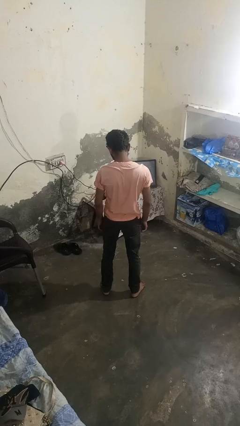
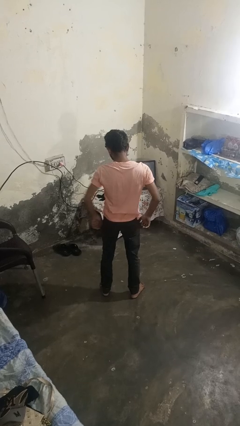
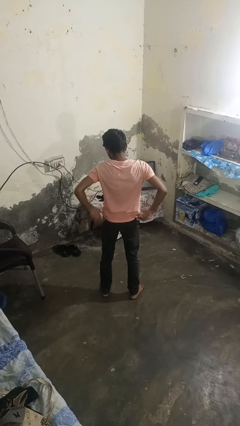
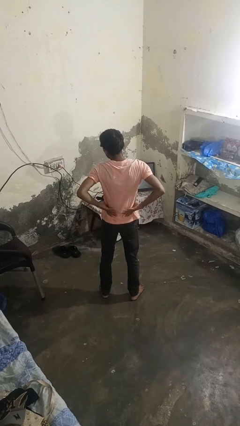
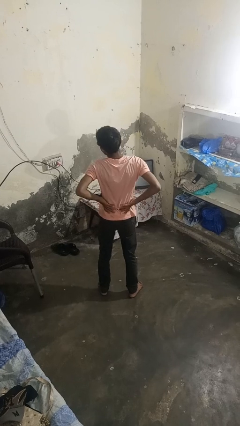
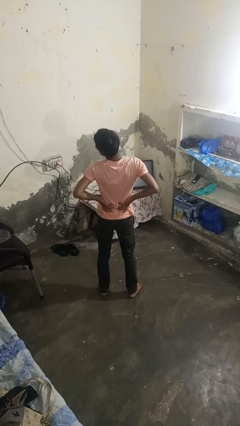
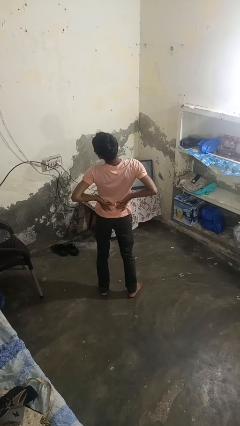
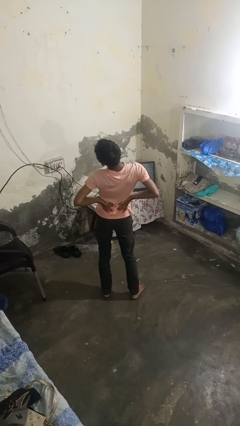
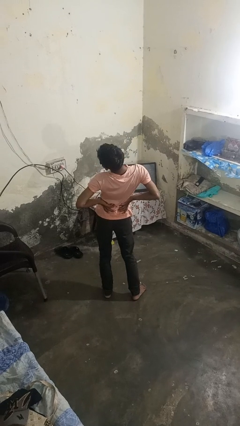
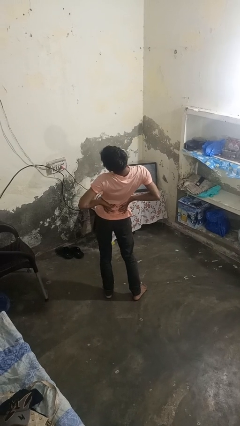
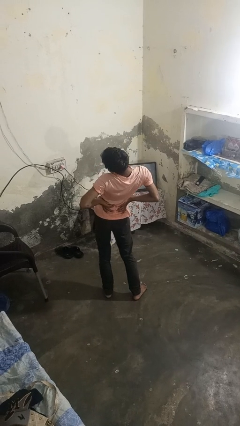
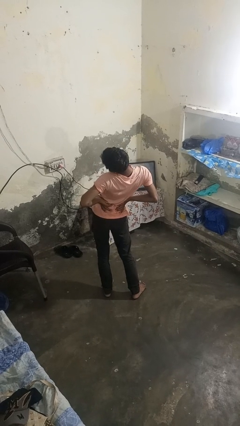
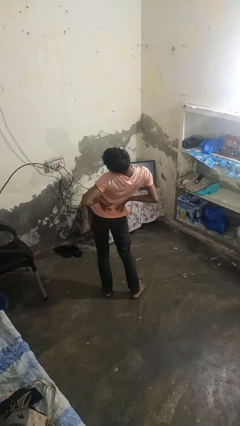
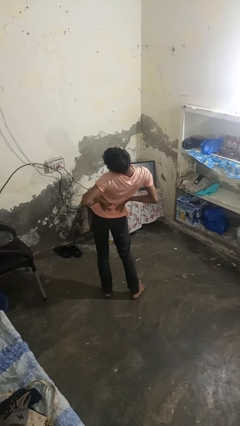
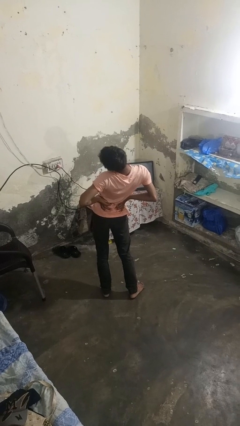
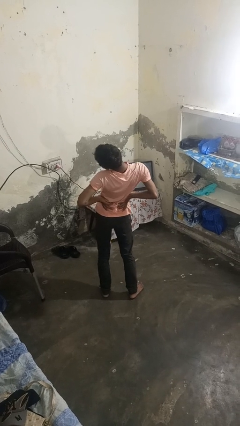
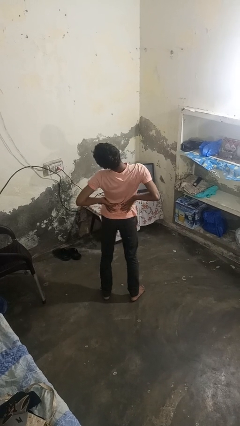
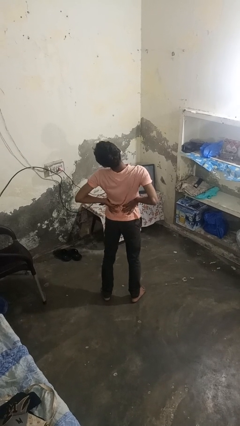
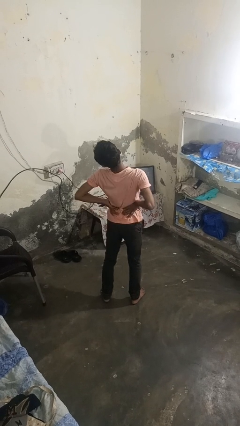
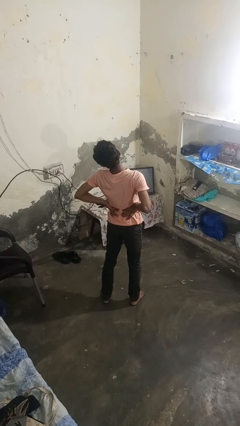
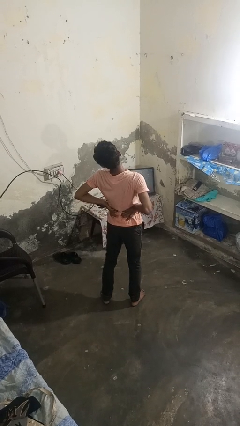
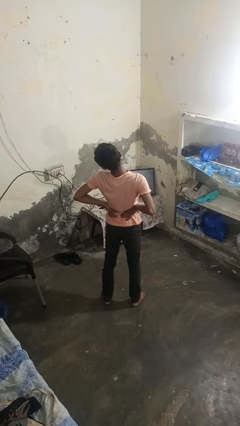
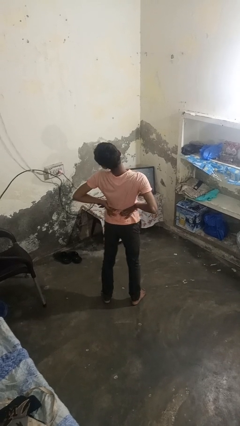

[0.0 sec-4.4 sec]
person stretches back

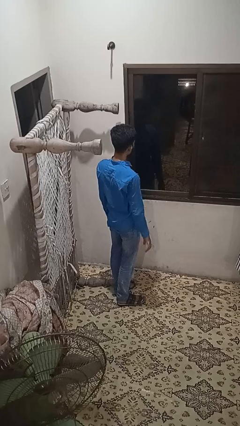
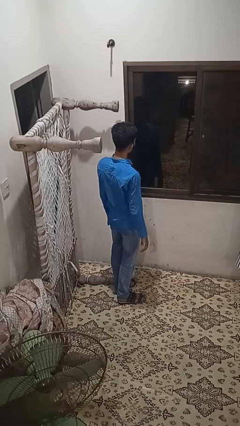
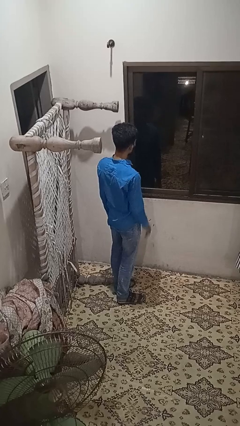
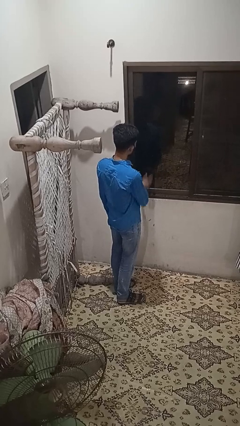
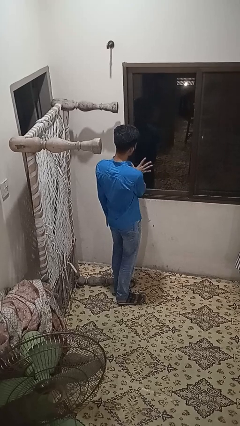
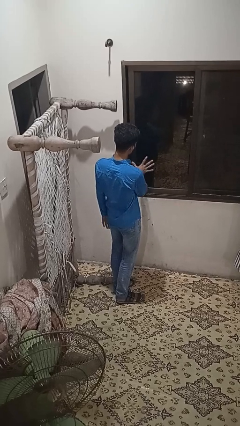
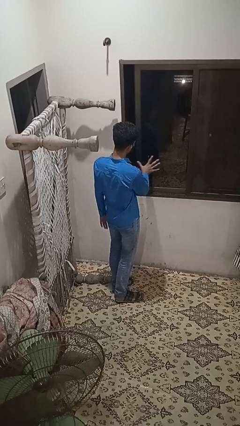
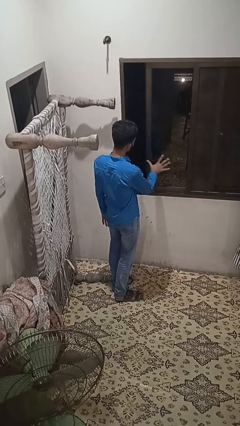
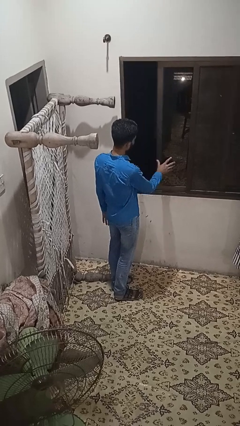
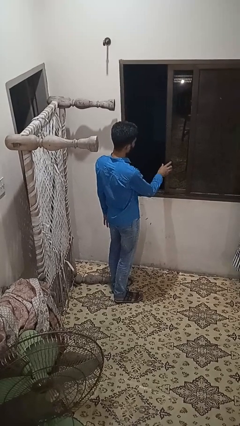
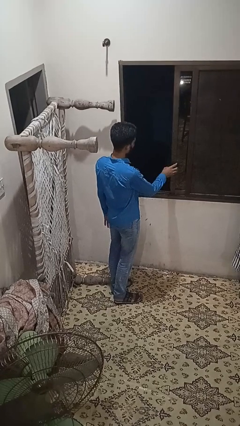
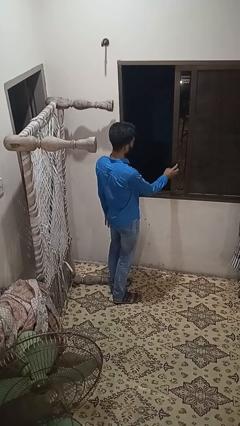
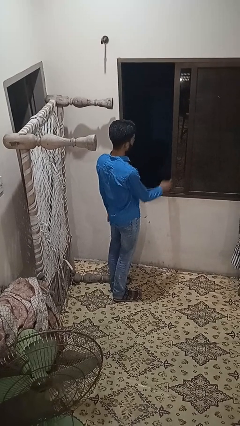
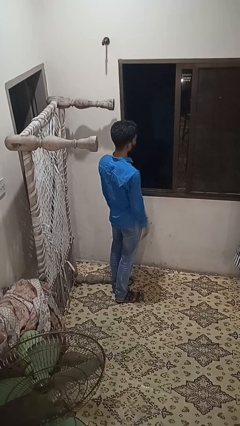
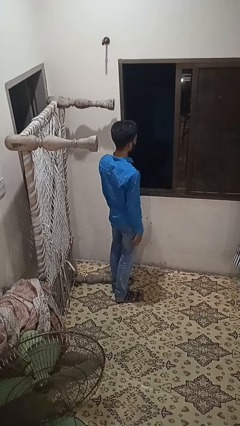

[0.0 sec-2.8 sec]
person opens home window

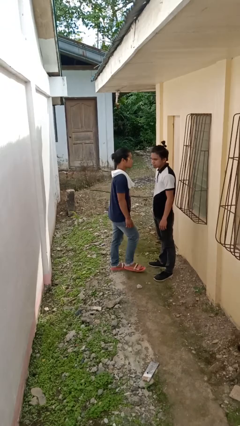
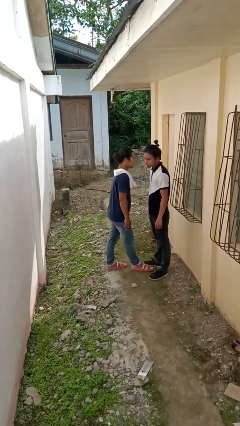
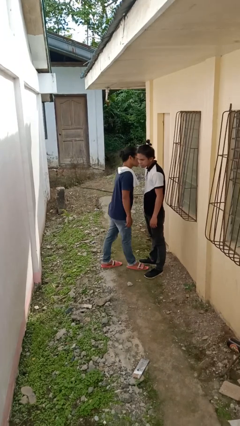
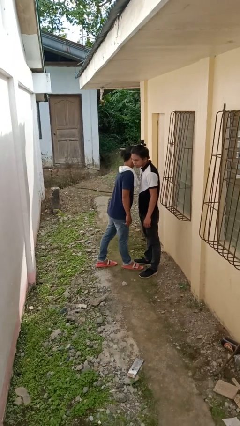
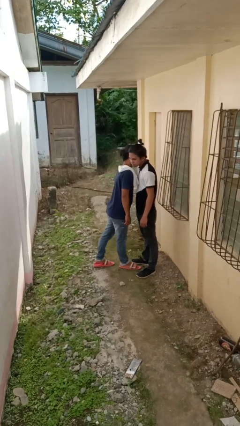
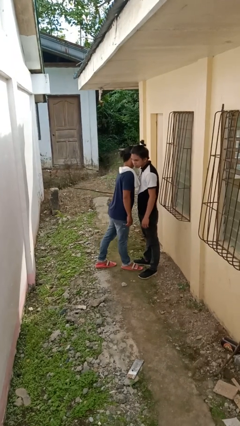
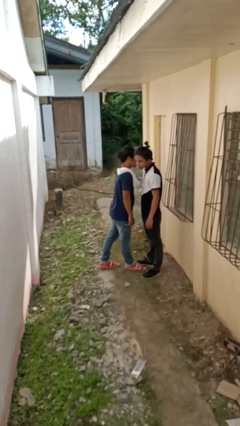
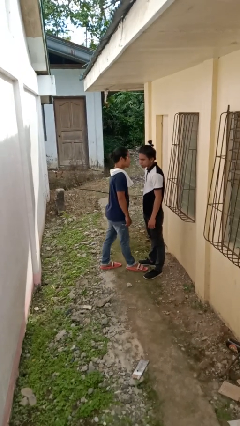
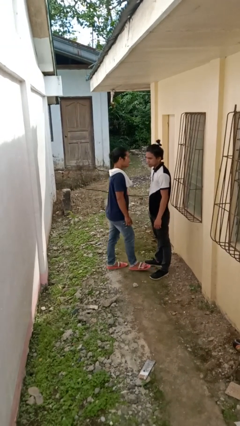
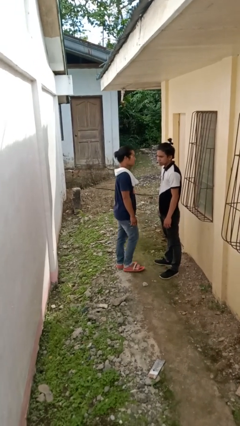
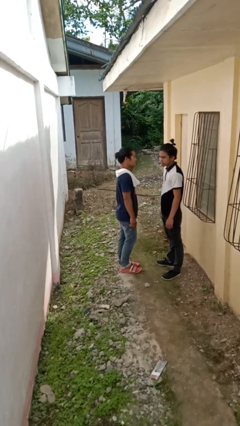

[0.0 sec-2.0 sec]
person kisses cheek of person

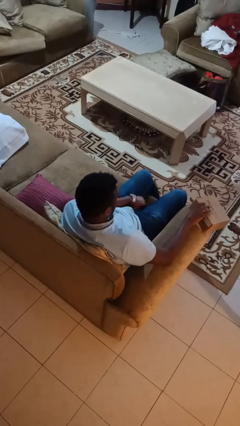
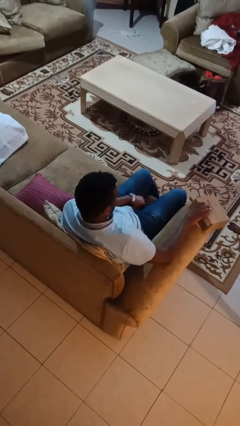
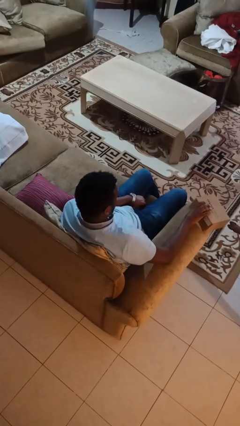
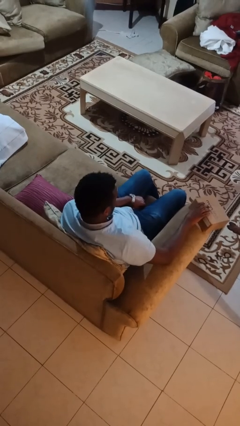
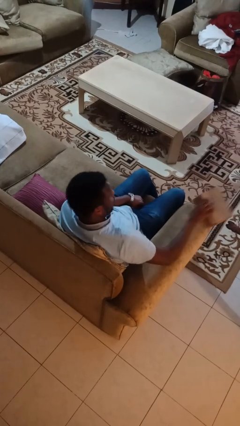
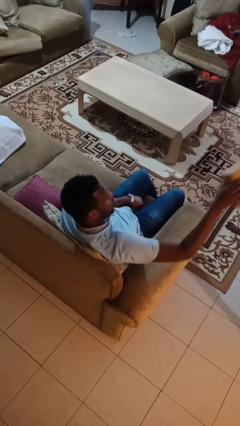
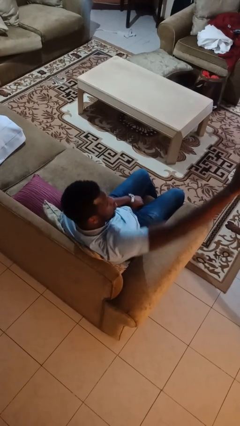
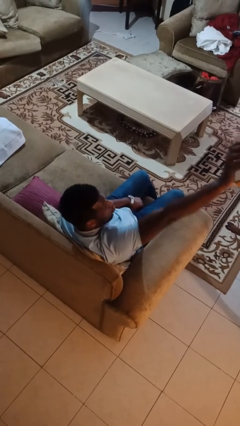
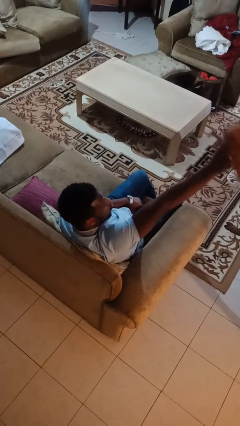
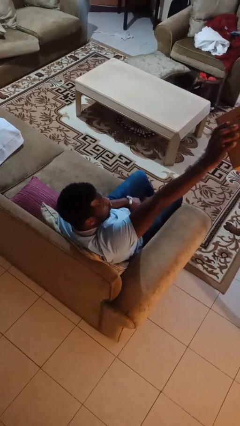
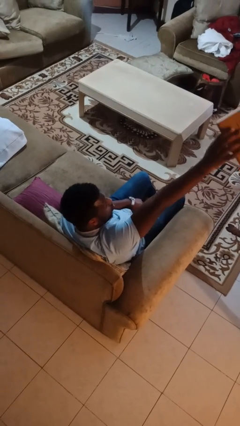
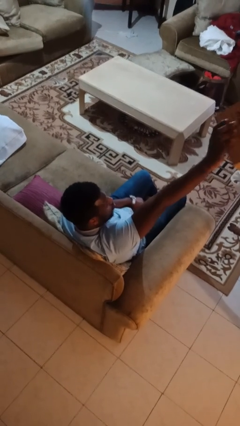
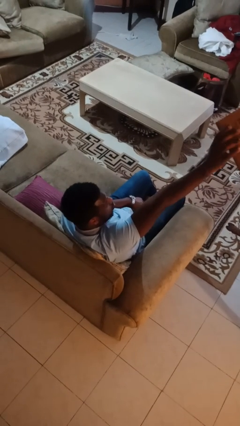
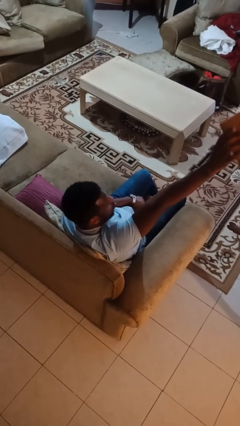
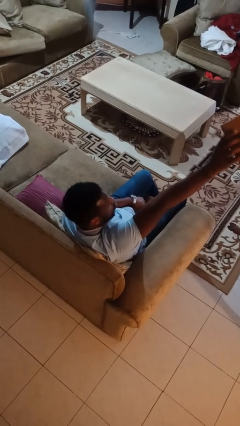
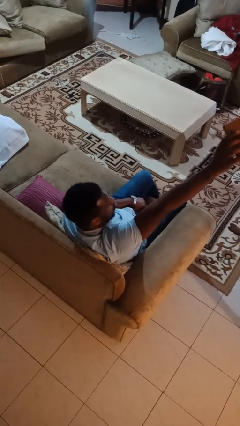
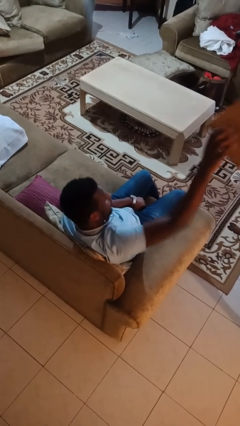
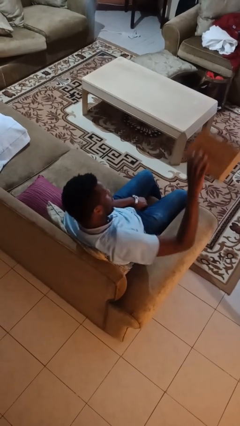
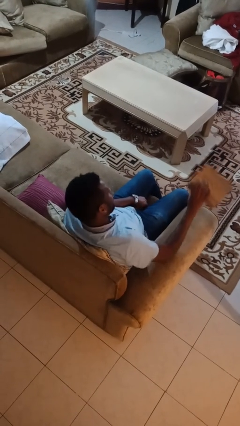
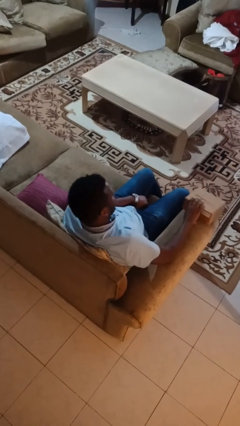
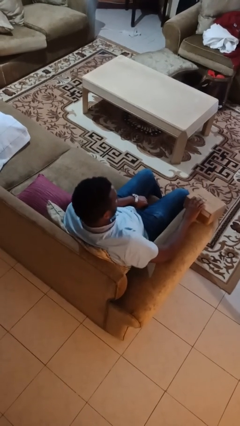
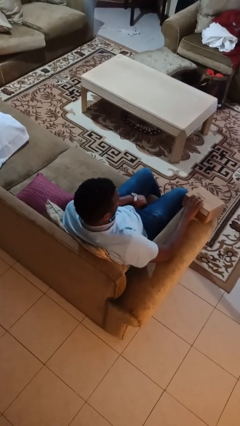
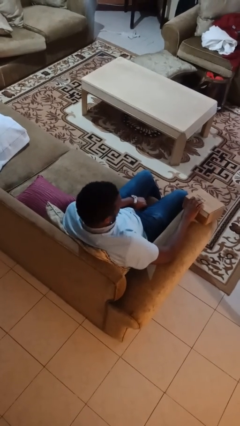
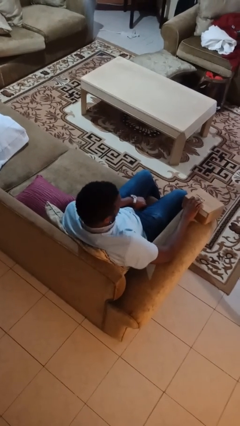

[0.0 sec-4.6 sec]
person holds object above head

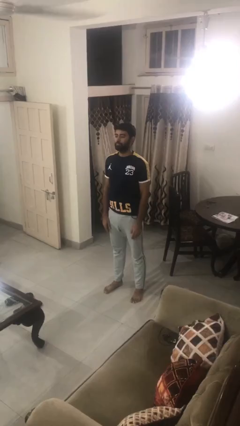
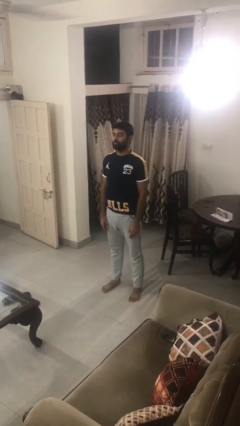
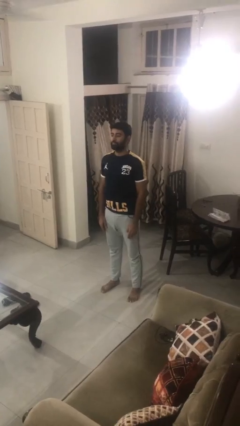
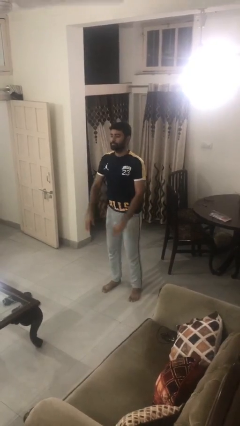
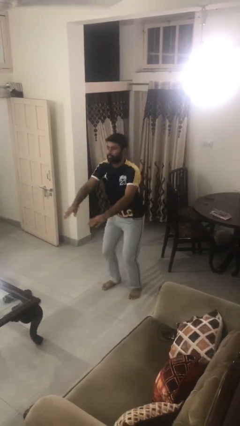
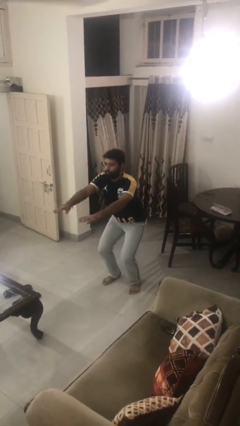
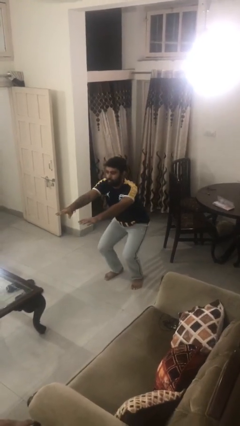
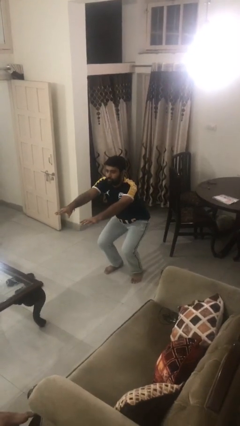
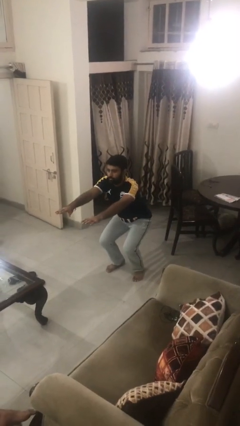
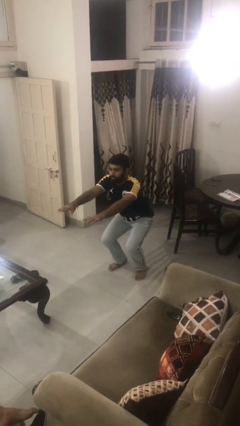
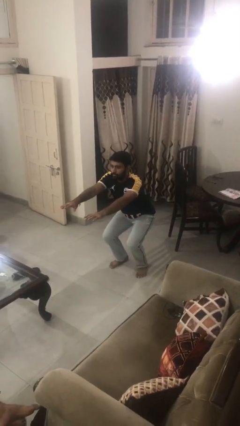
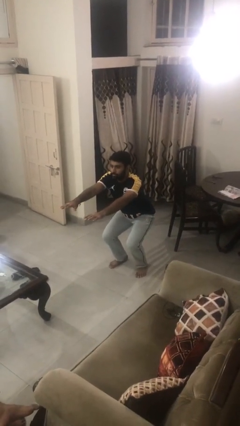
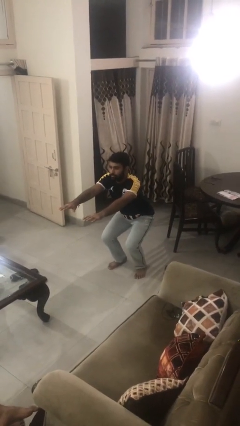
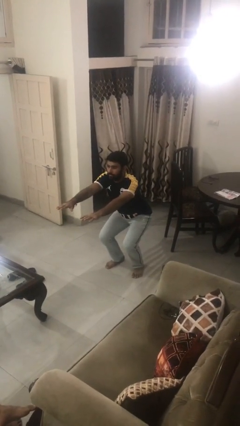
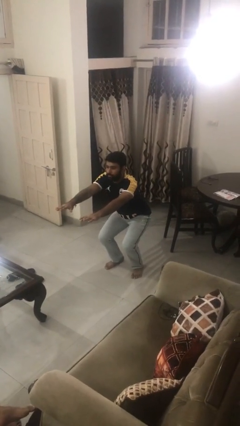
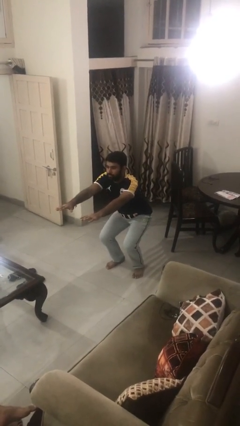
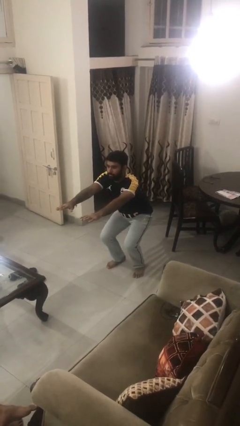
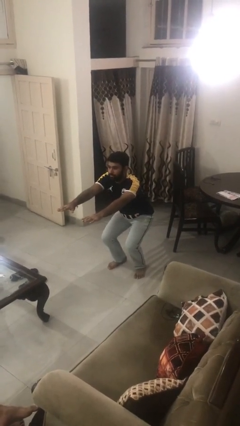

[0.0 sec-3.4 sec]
person squats

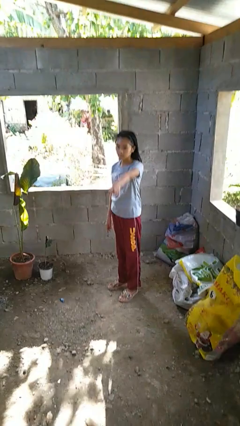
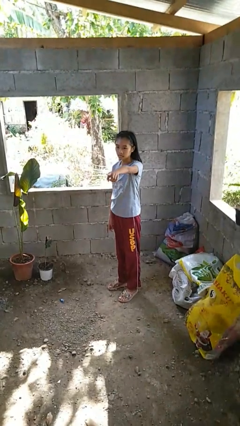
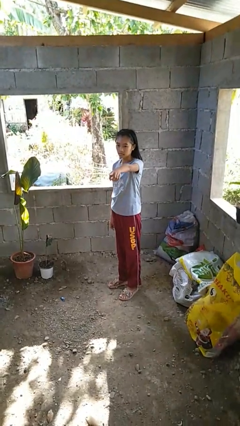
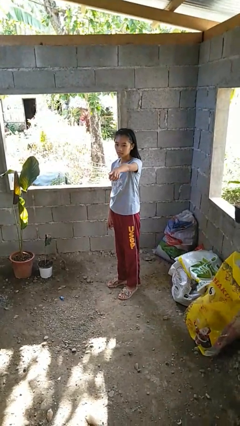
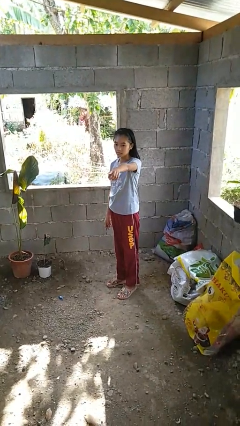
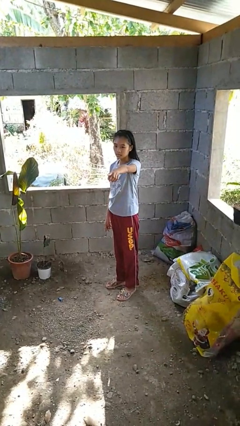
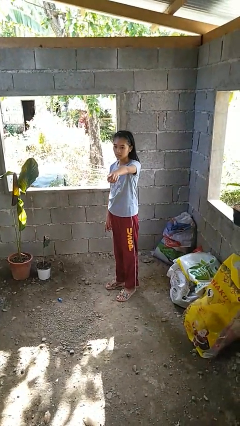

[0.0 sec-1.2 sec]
person points at person
